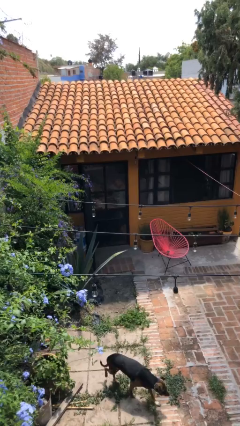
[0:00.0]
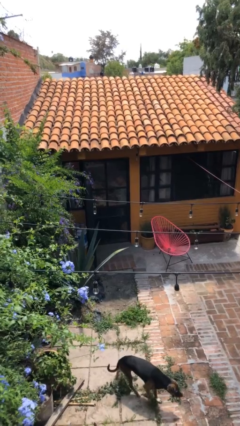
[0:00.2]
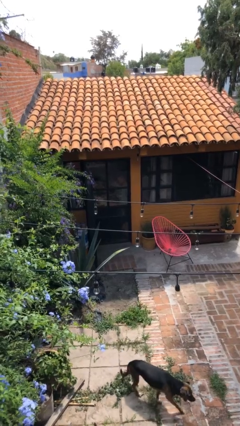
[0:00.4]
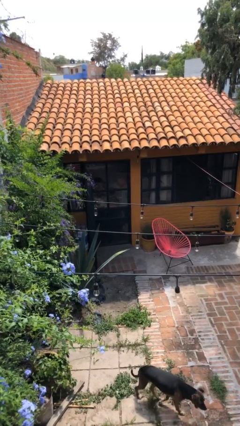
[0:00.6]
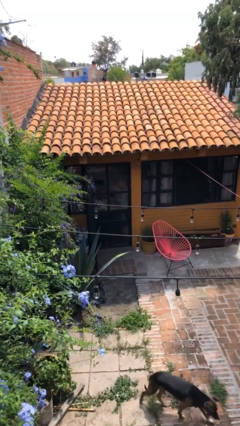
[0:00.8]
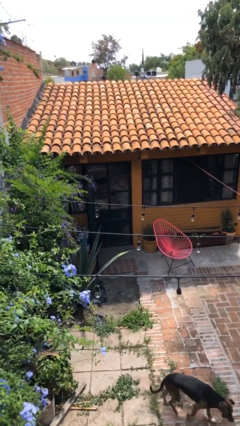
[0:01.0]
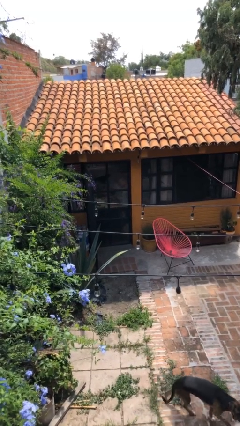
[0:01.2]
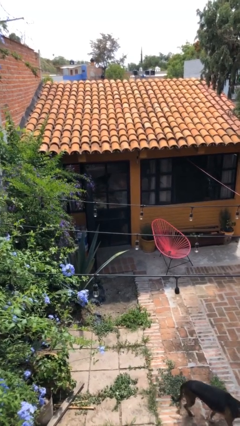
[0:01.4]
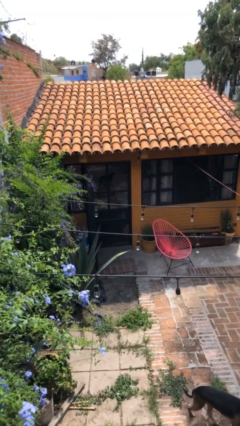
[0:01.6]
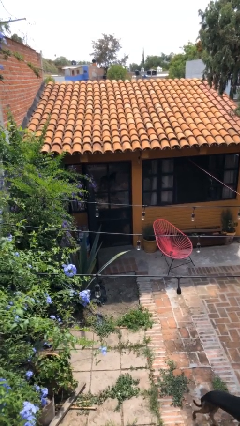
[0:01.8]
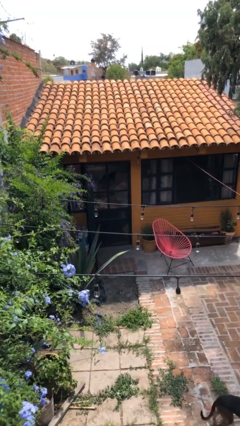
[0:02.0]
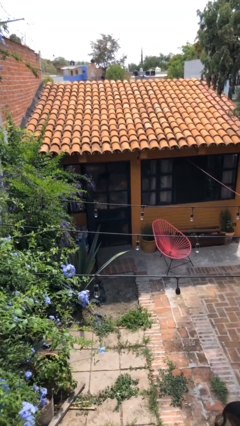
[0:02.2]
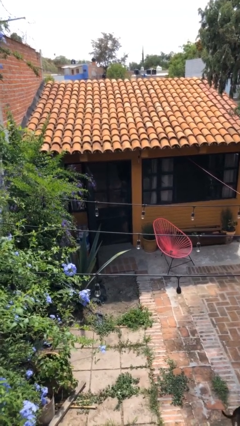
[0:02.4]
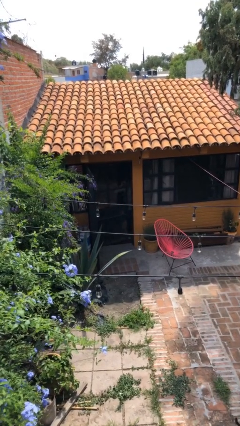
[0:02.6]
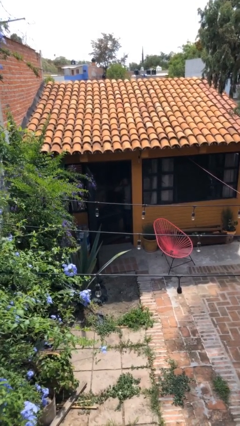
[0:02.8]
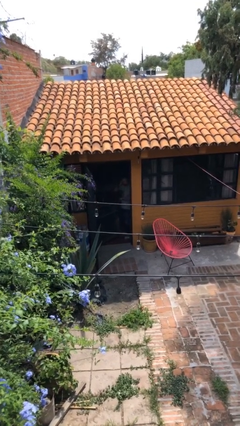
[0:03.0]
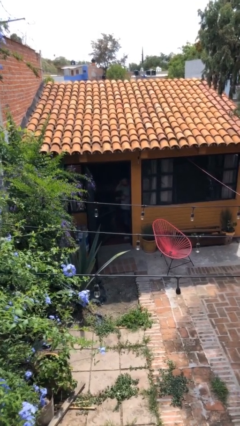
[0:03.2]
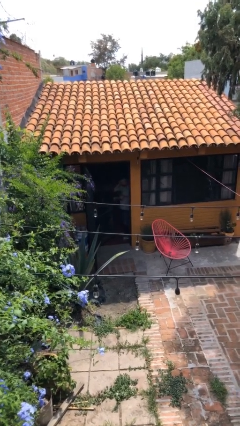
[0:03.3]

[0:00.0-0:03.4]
person opens facility door

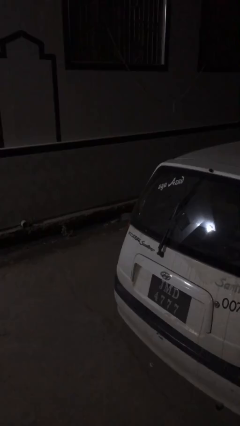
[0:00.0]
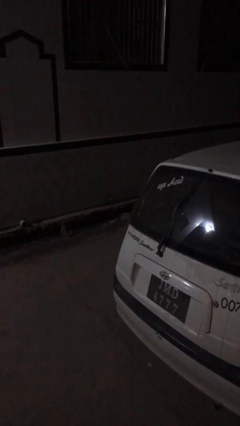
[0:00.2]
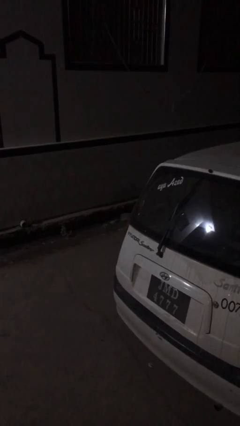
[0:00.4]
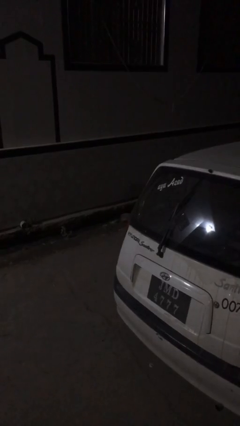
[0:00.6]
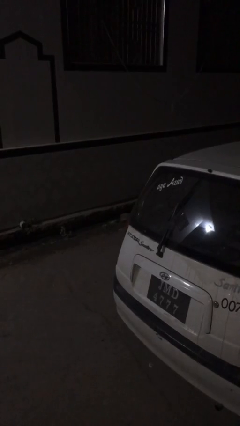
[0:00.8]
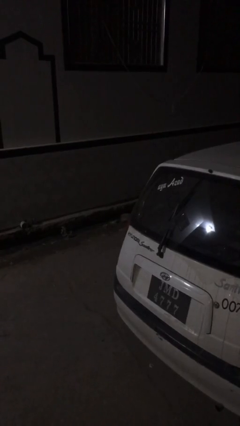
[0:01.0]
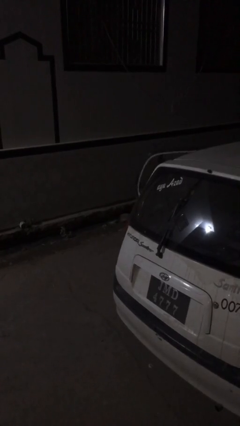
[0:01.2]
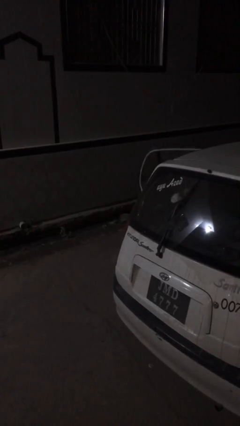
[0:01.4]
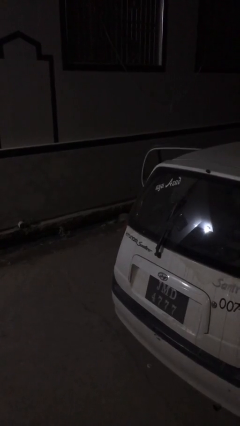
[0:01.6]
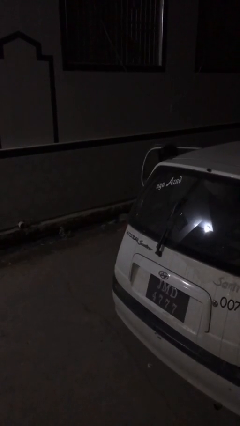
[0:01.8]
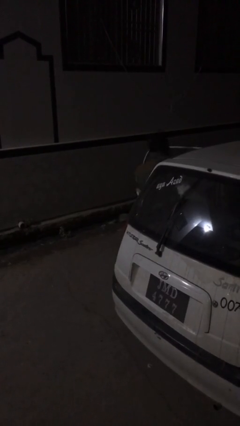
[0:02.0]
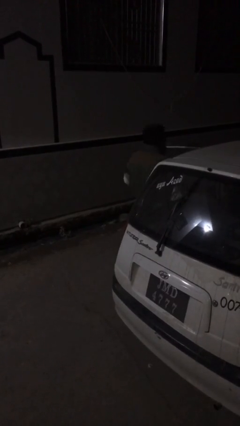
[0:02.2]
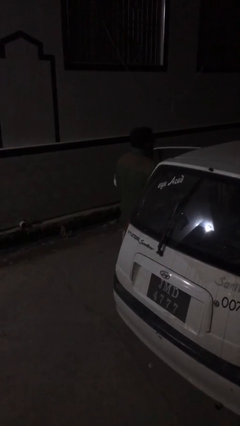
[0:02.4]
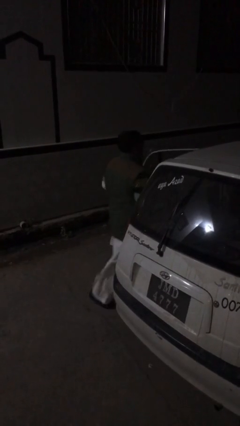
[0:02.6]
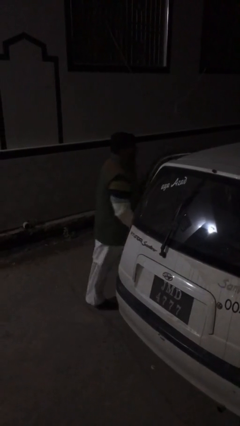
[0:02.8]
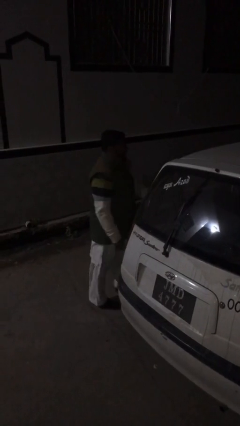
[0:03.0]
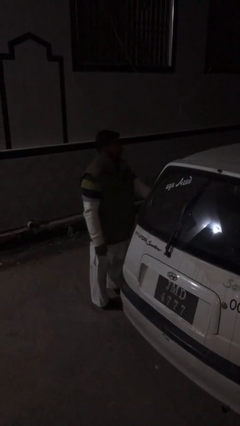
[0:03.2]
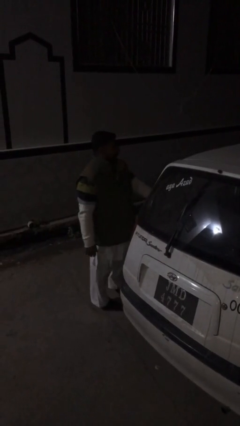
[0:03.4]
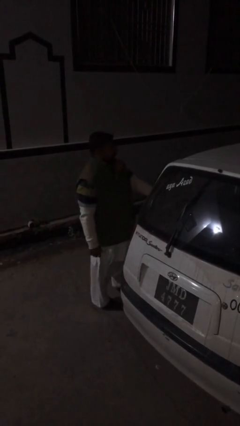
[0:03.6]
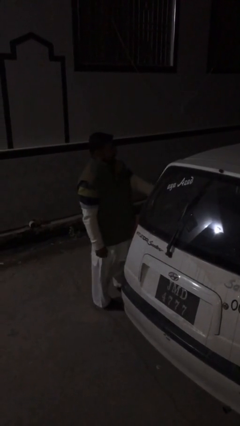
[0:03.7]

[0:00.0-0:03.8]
person exits car

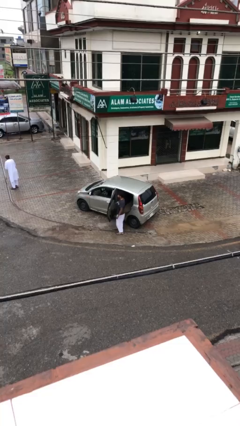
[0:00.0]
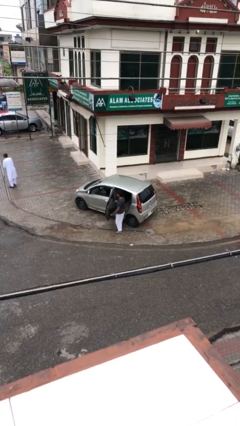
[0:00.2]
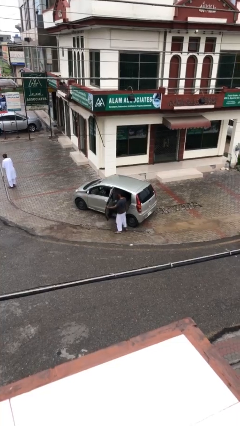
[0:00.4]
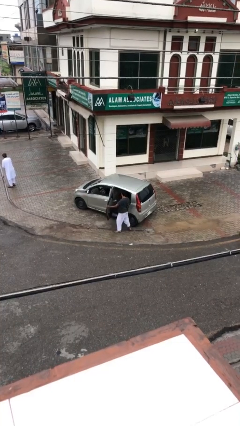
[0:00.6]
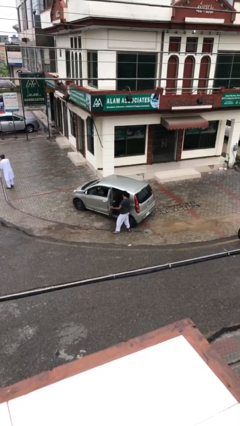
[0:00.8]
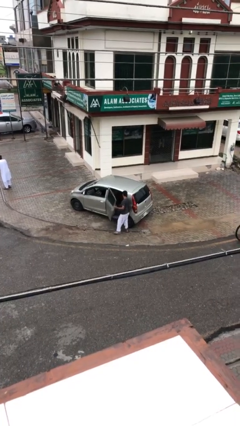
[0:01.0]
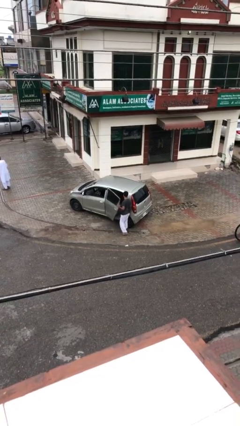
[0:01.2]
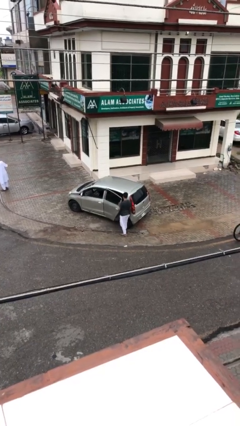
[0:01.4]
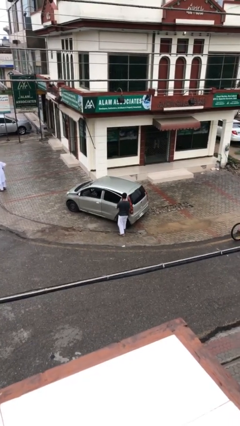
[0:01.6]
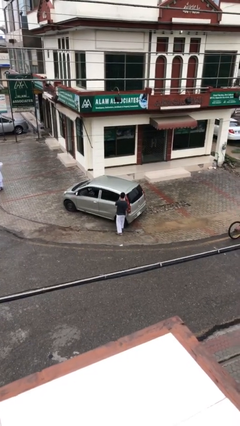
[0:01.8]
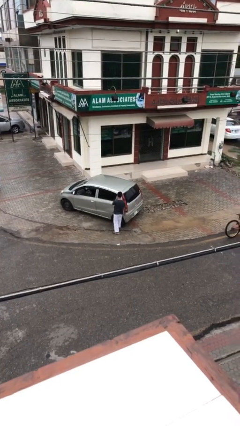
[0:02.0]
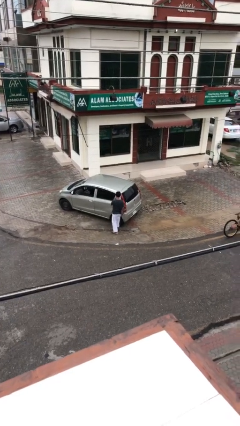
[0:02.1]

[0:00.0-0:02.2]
person closes car door

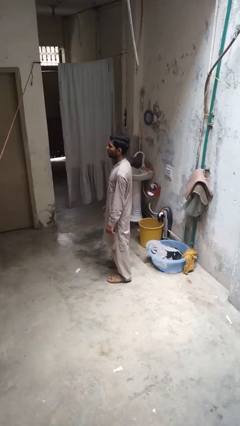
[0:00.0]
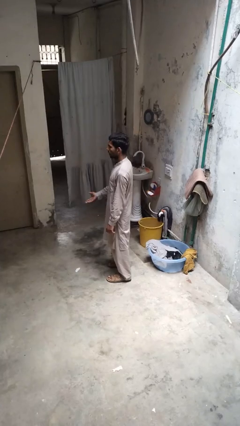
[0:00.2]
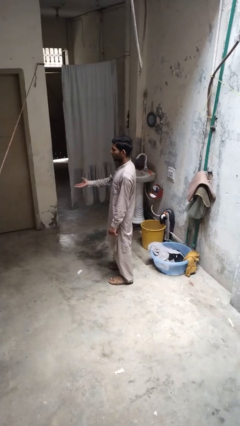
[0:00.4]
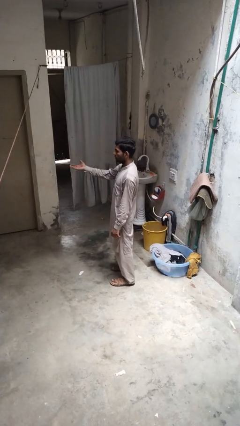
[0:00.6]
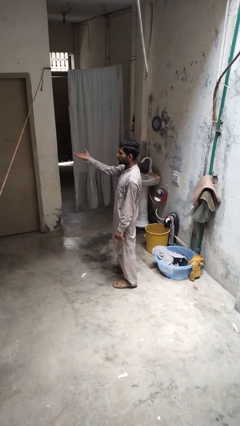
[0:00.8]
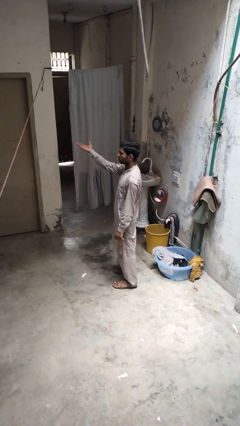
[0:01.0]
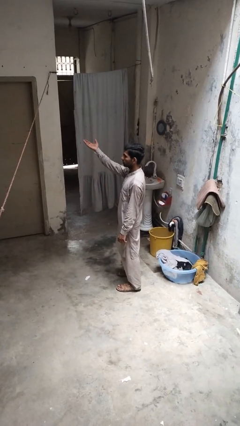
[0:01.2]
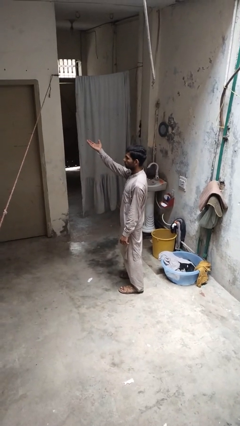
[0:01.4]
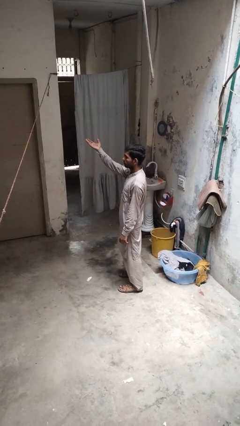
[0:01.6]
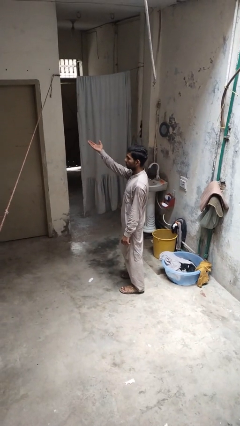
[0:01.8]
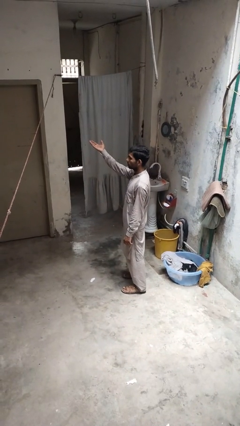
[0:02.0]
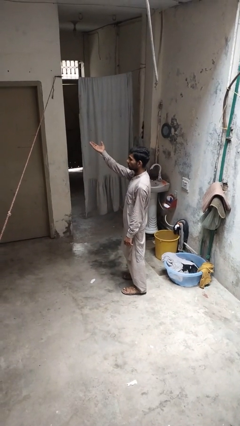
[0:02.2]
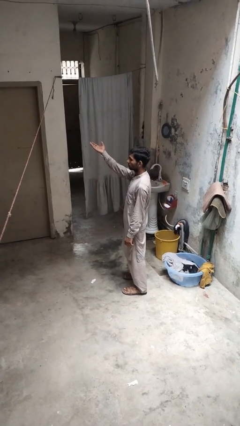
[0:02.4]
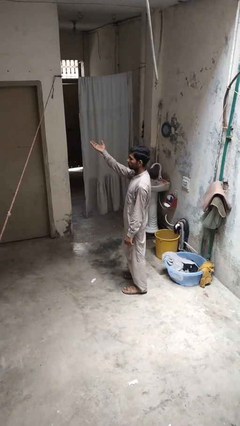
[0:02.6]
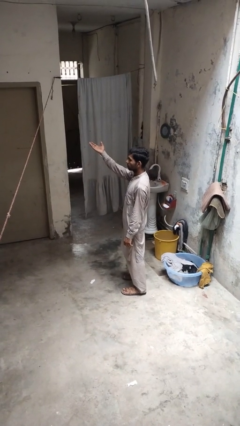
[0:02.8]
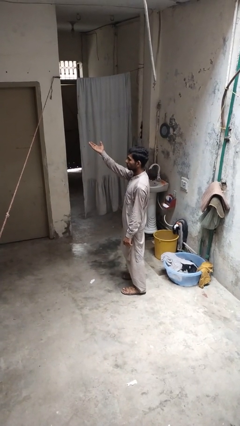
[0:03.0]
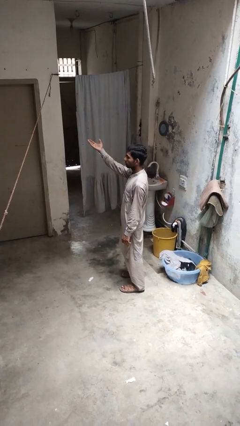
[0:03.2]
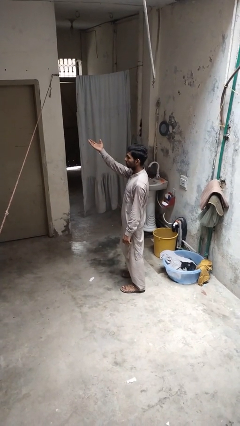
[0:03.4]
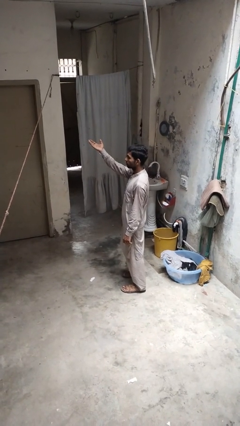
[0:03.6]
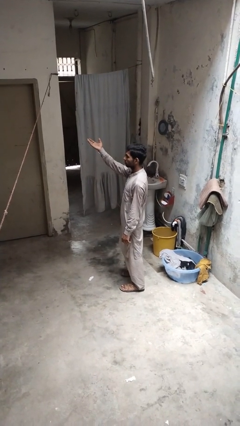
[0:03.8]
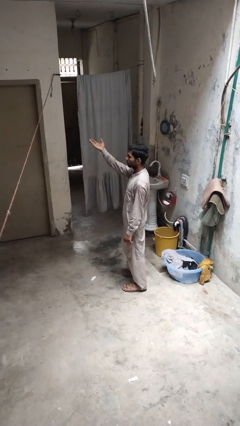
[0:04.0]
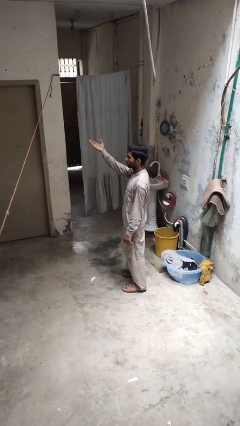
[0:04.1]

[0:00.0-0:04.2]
person gestures swipe up

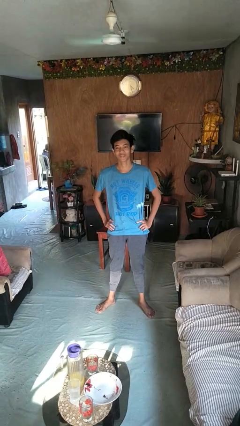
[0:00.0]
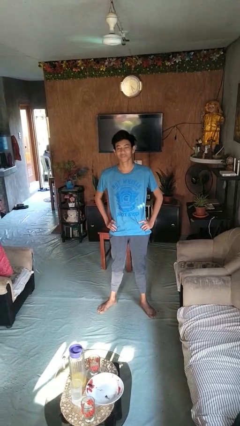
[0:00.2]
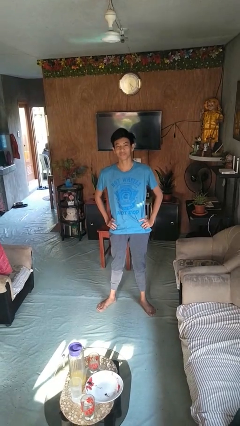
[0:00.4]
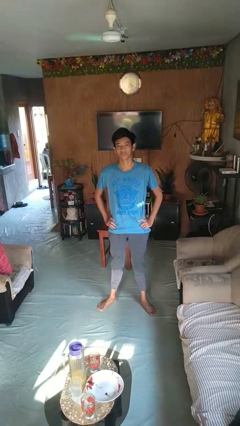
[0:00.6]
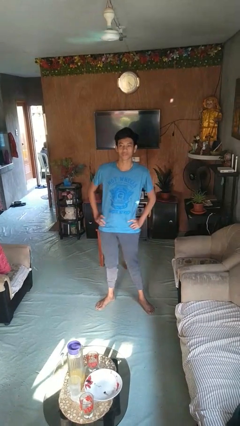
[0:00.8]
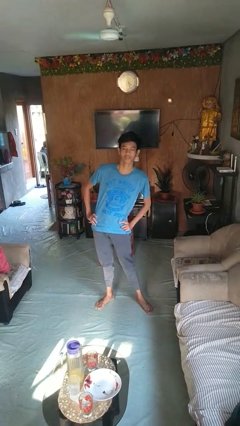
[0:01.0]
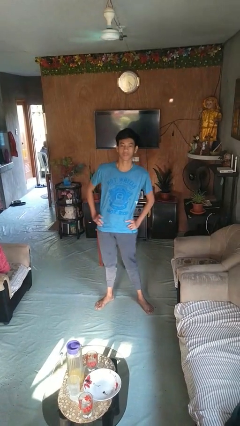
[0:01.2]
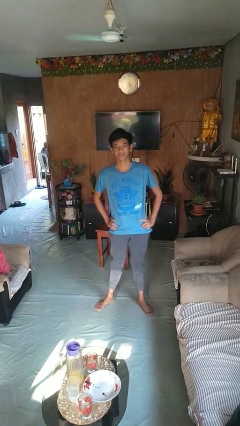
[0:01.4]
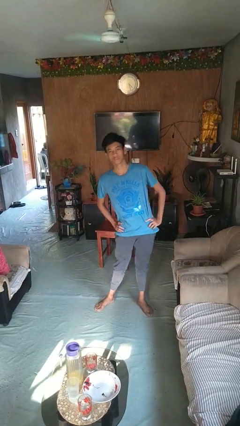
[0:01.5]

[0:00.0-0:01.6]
person wiggles hips

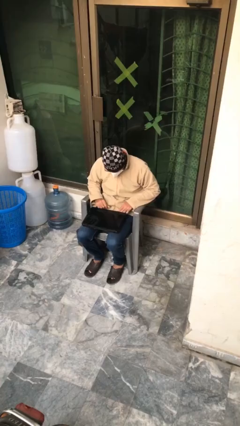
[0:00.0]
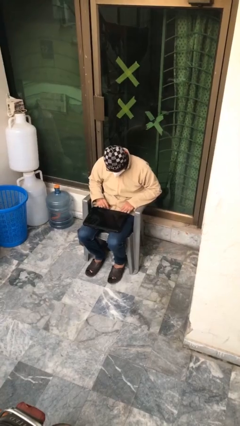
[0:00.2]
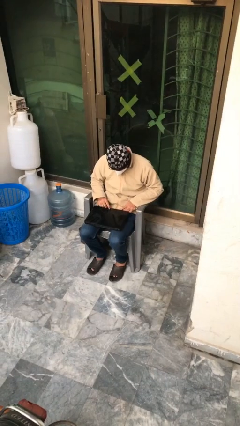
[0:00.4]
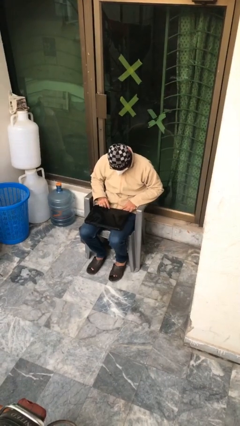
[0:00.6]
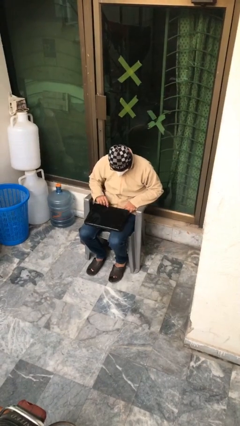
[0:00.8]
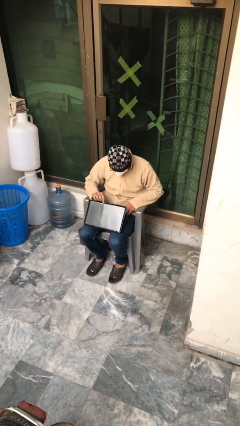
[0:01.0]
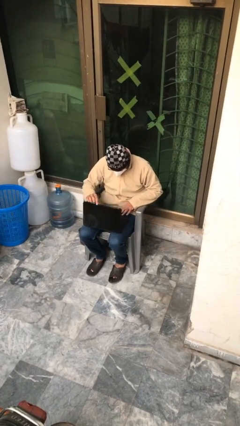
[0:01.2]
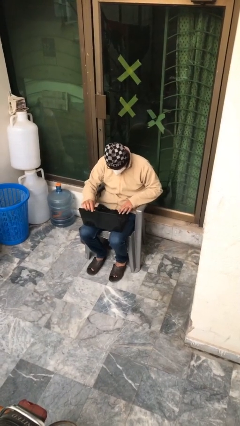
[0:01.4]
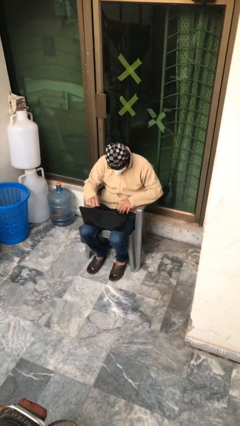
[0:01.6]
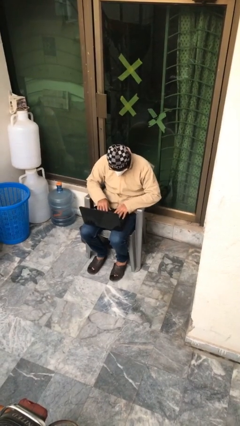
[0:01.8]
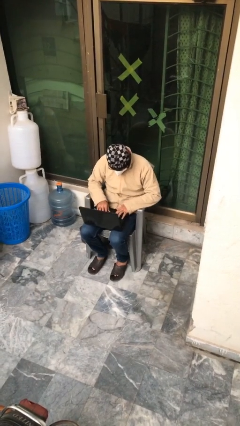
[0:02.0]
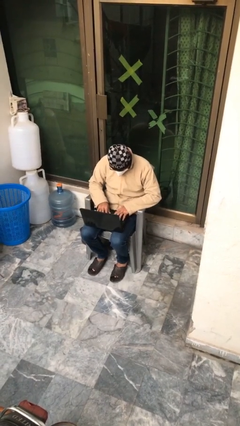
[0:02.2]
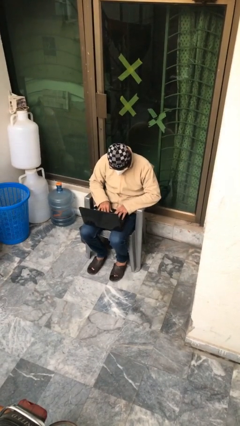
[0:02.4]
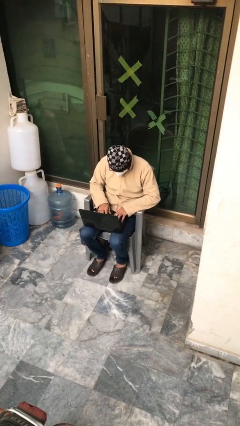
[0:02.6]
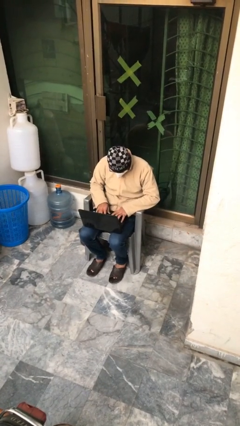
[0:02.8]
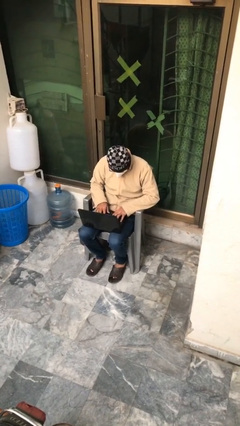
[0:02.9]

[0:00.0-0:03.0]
person interacts with laptop
